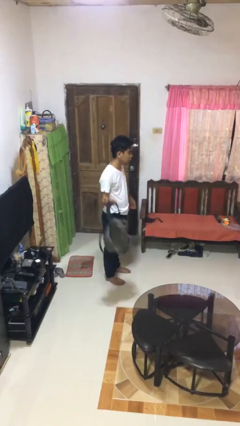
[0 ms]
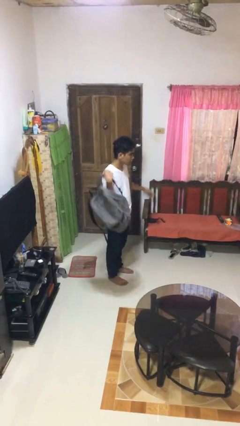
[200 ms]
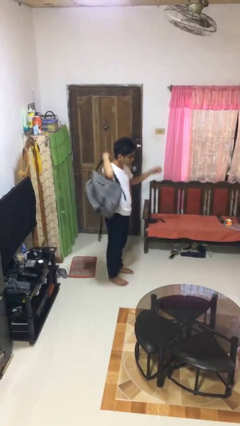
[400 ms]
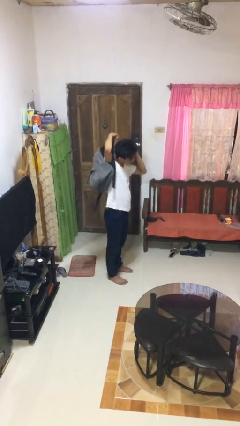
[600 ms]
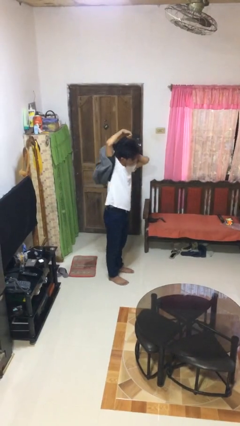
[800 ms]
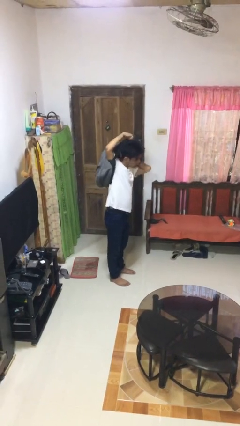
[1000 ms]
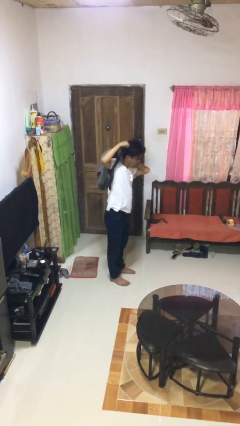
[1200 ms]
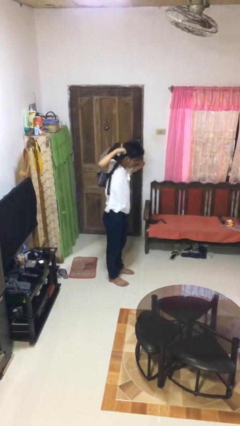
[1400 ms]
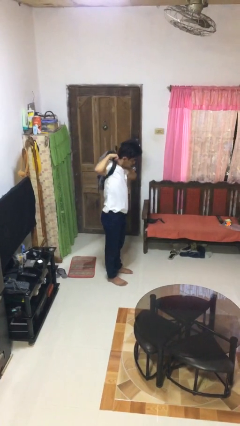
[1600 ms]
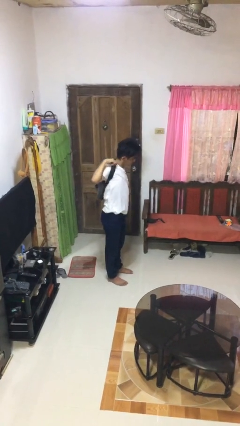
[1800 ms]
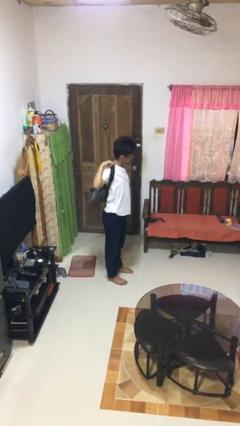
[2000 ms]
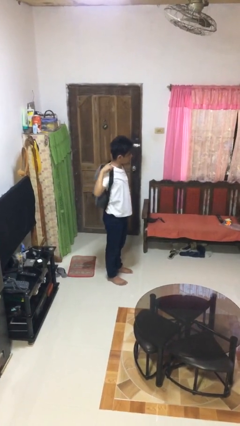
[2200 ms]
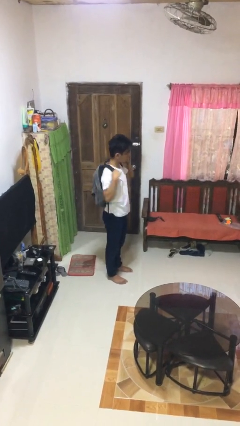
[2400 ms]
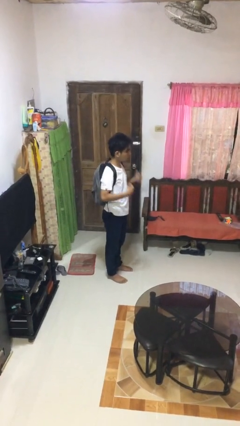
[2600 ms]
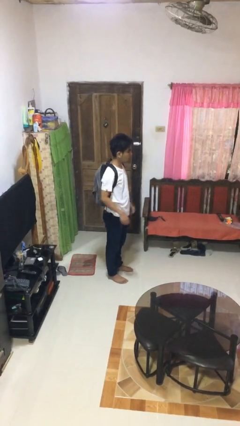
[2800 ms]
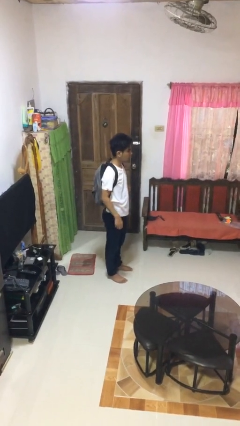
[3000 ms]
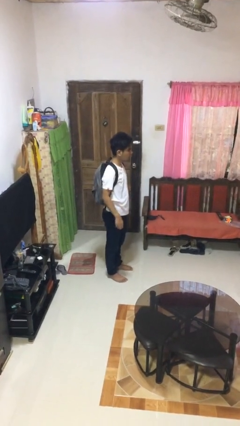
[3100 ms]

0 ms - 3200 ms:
person puts on backpack

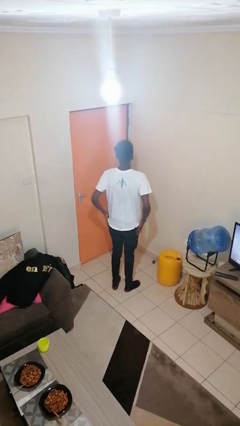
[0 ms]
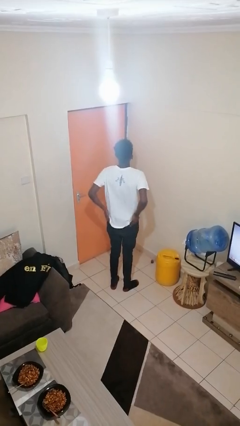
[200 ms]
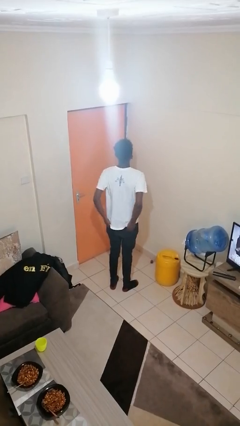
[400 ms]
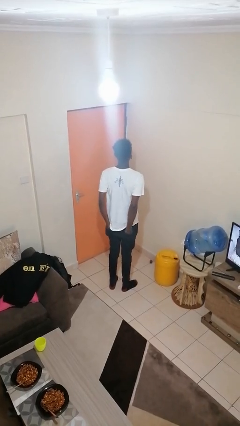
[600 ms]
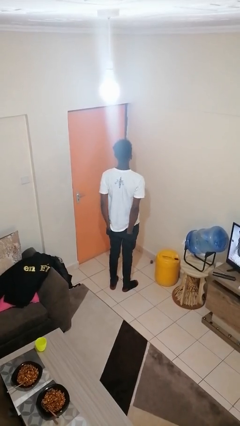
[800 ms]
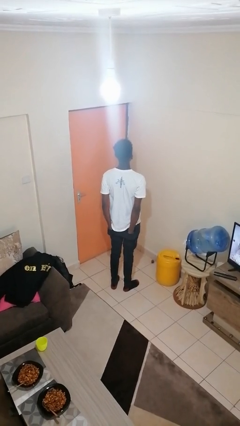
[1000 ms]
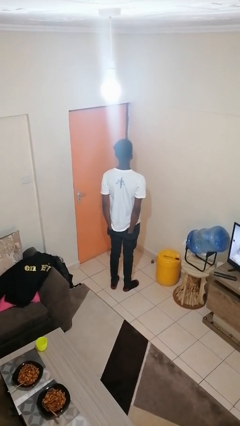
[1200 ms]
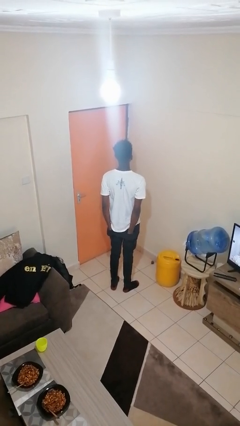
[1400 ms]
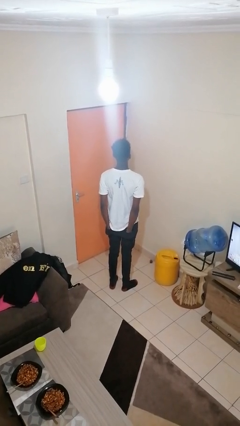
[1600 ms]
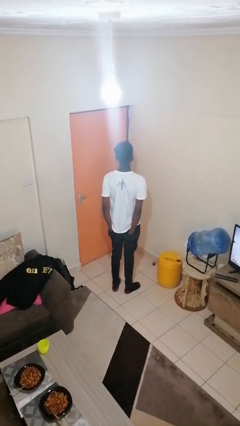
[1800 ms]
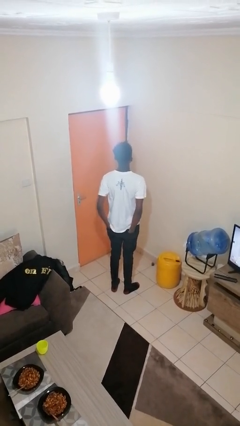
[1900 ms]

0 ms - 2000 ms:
person puts hands in back pockets

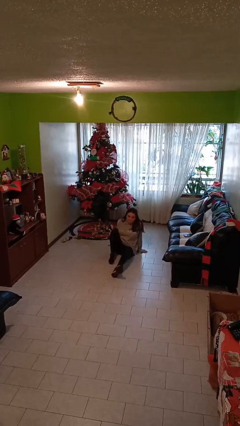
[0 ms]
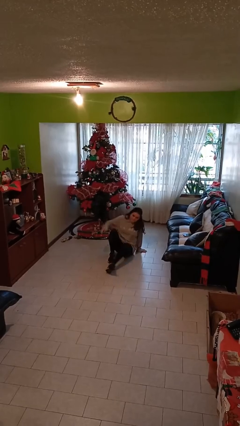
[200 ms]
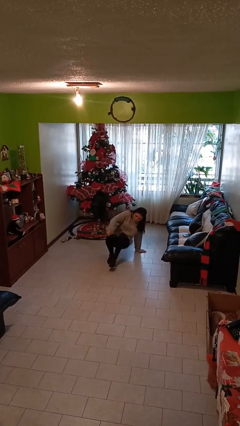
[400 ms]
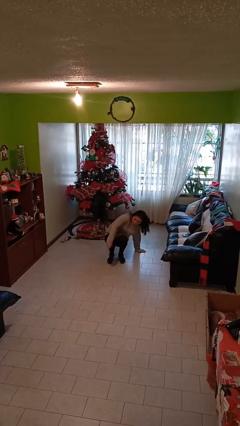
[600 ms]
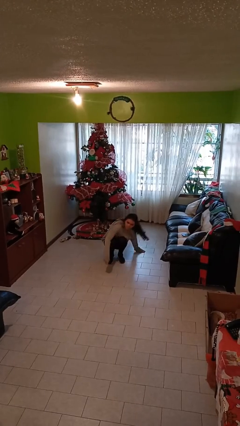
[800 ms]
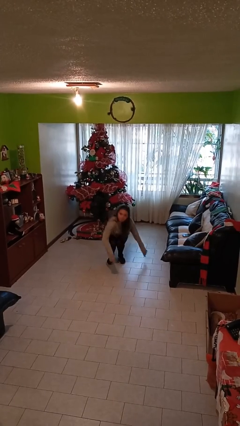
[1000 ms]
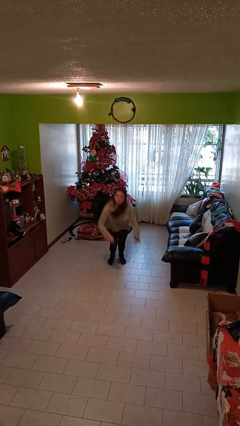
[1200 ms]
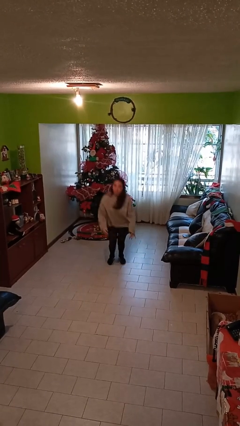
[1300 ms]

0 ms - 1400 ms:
person stands up

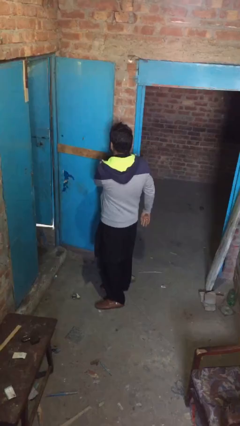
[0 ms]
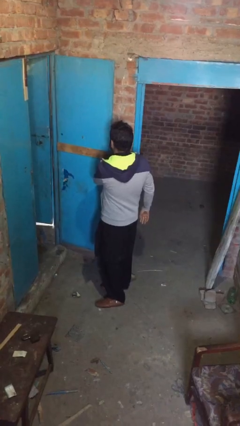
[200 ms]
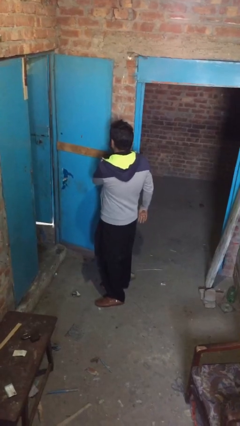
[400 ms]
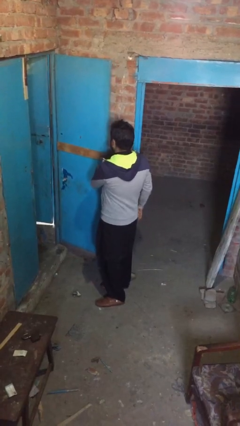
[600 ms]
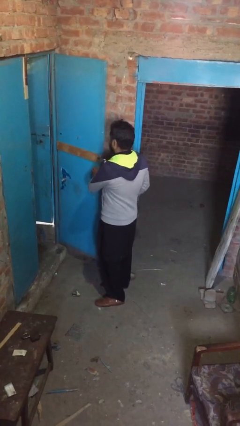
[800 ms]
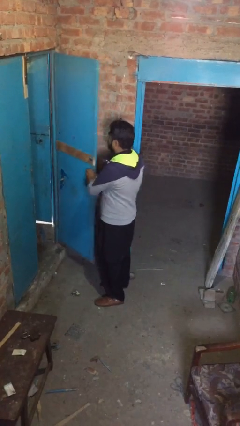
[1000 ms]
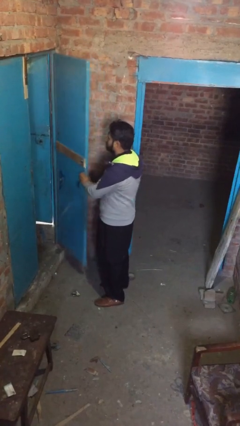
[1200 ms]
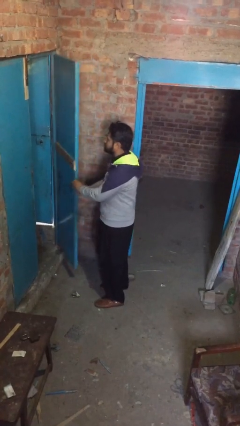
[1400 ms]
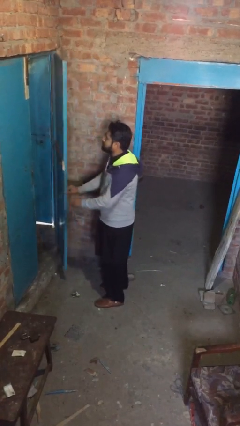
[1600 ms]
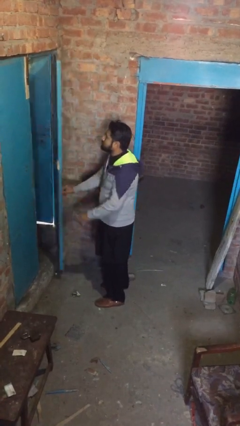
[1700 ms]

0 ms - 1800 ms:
person closes facility door

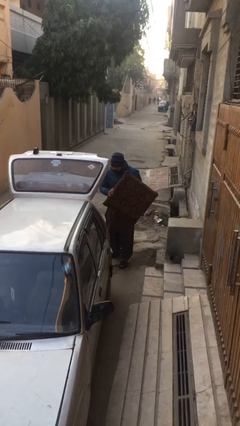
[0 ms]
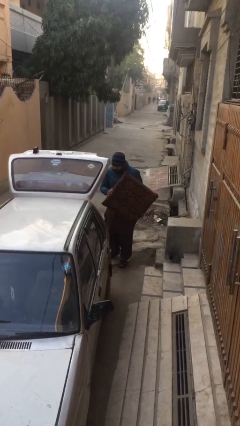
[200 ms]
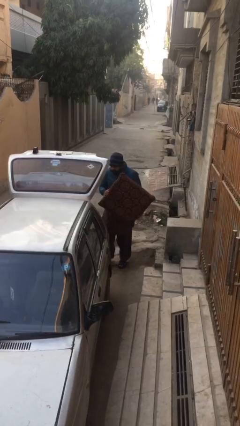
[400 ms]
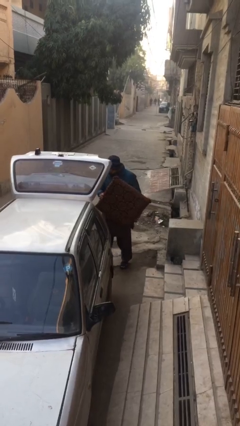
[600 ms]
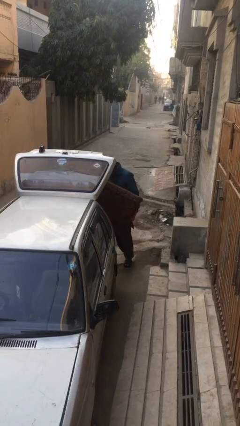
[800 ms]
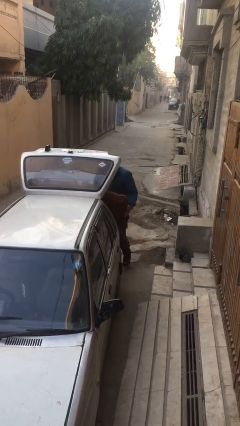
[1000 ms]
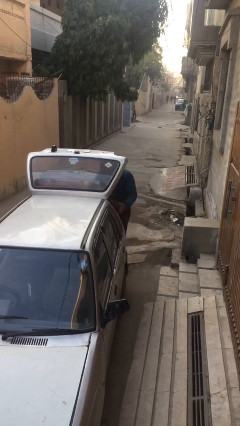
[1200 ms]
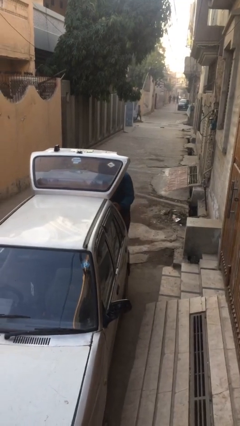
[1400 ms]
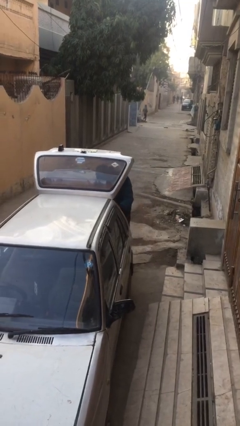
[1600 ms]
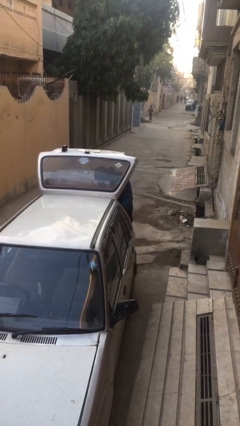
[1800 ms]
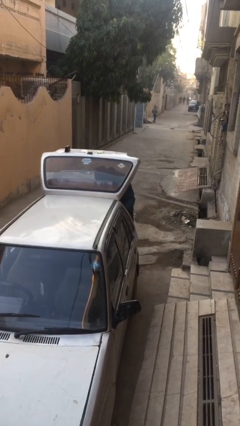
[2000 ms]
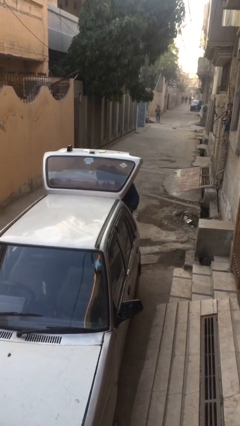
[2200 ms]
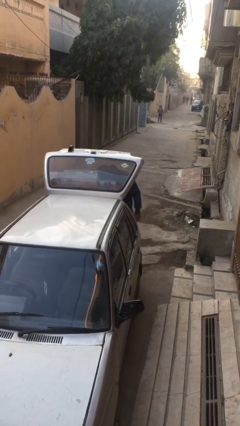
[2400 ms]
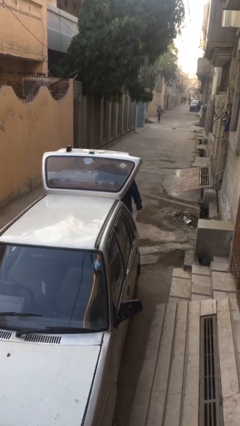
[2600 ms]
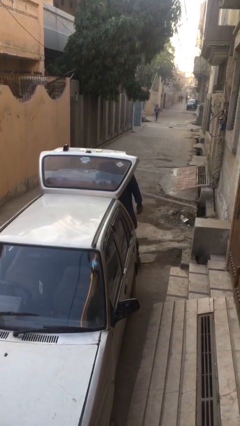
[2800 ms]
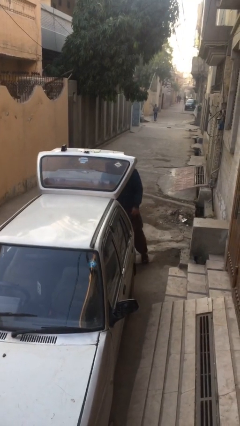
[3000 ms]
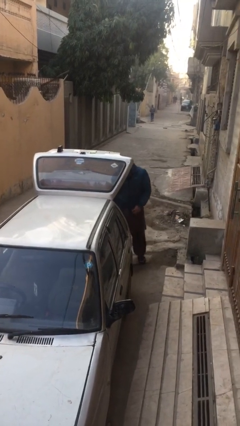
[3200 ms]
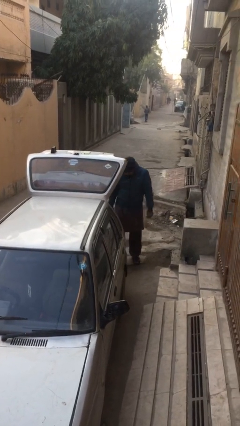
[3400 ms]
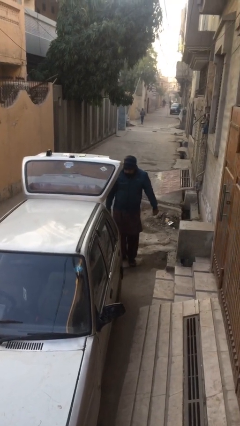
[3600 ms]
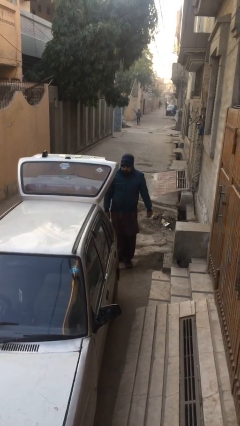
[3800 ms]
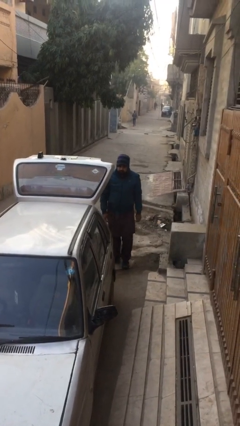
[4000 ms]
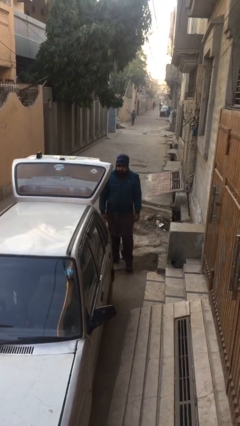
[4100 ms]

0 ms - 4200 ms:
person loads car

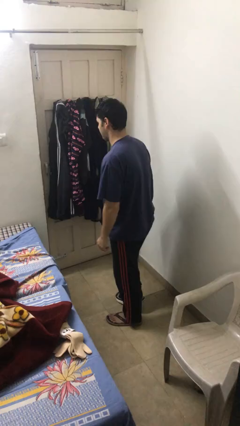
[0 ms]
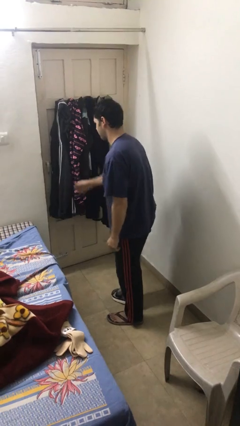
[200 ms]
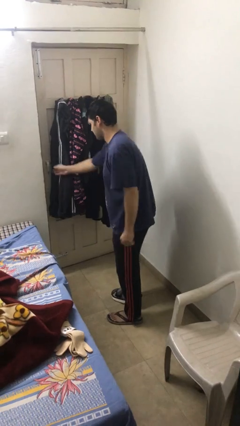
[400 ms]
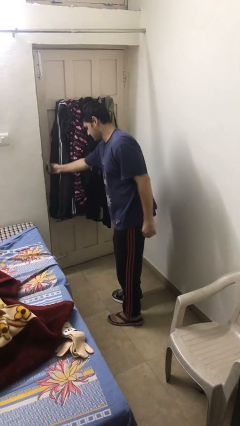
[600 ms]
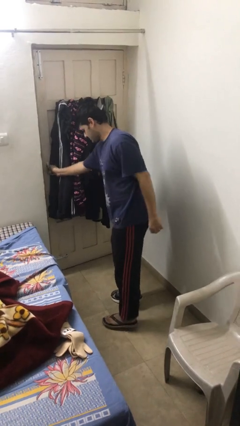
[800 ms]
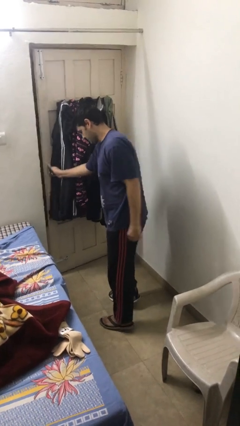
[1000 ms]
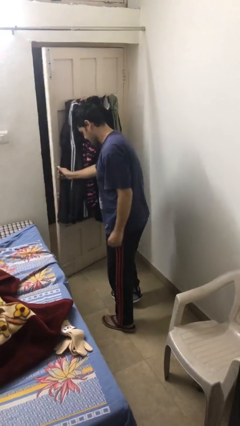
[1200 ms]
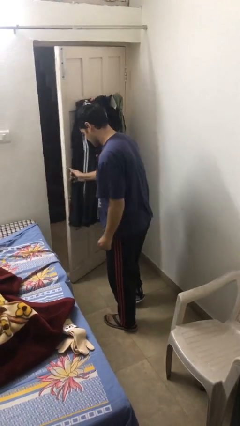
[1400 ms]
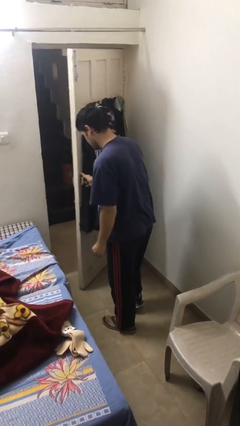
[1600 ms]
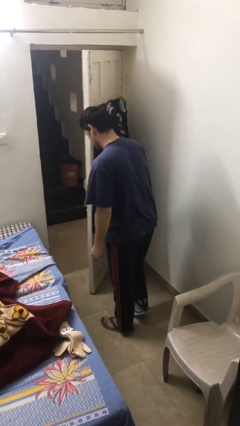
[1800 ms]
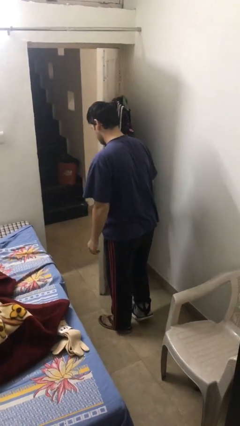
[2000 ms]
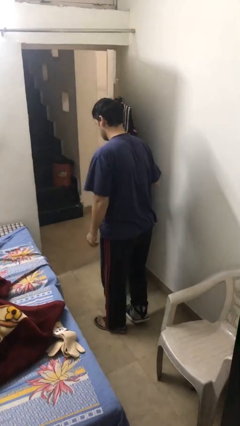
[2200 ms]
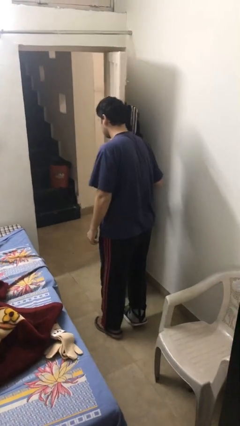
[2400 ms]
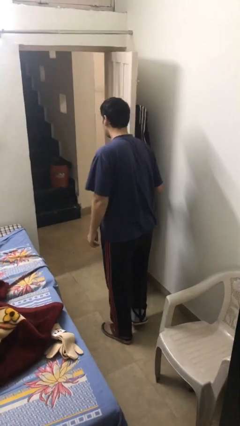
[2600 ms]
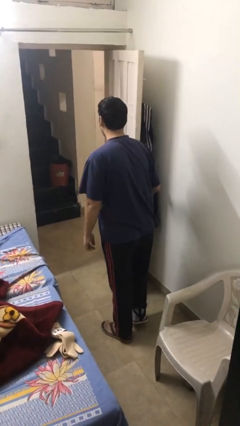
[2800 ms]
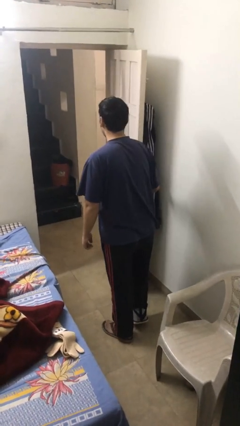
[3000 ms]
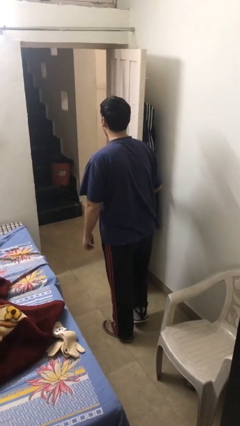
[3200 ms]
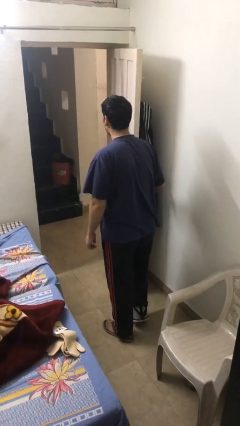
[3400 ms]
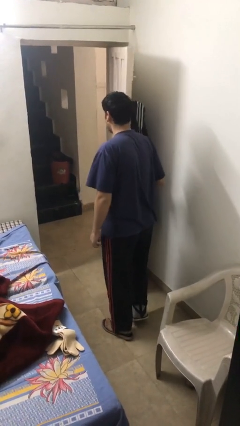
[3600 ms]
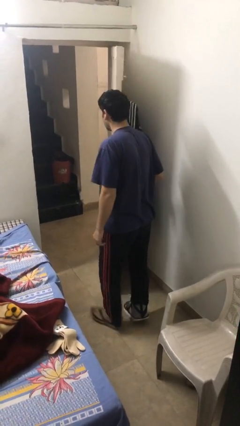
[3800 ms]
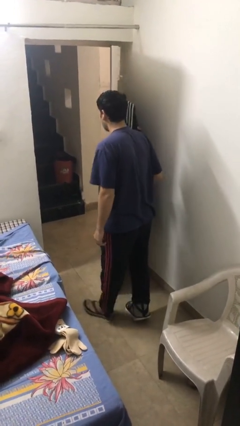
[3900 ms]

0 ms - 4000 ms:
person opens facility door

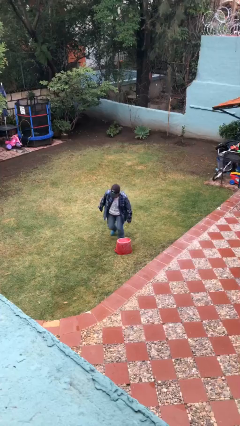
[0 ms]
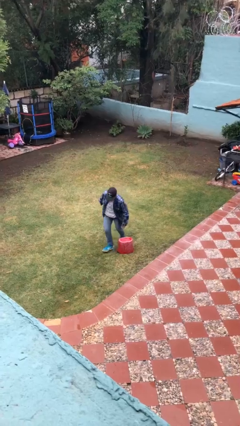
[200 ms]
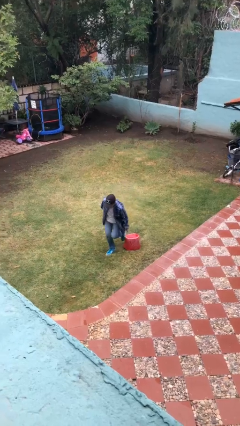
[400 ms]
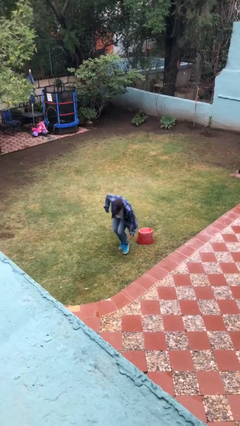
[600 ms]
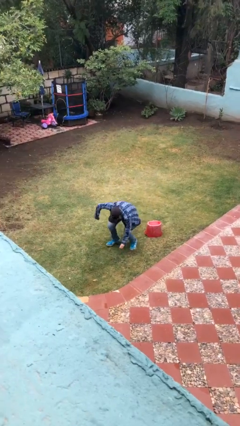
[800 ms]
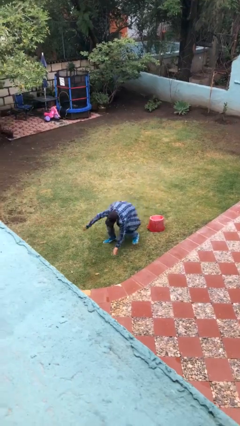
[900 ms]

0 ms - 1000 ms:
person trips on object on floor
